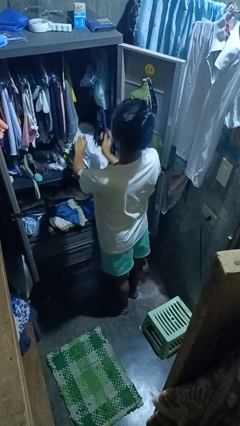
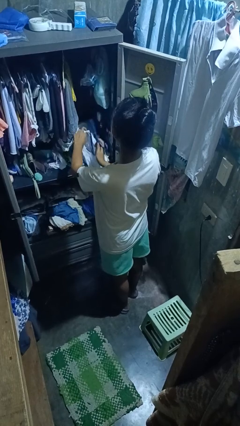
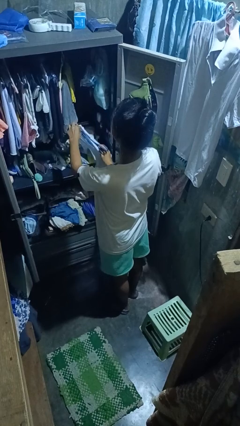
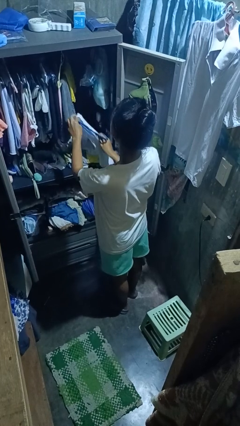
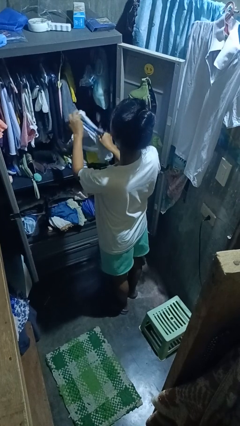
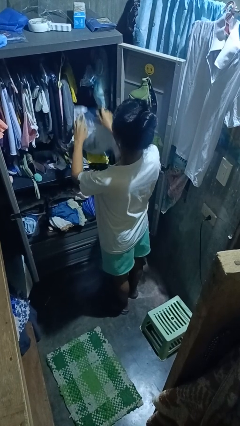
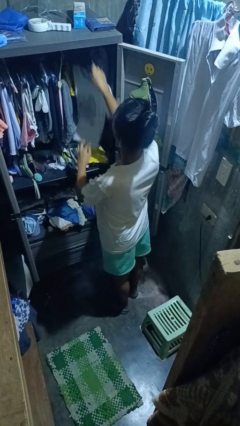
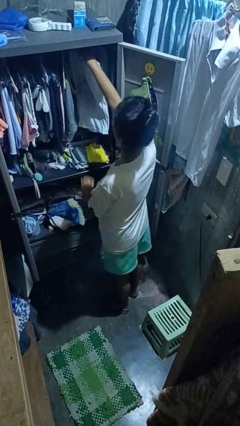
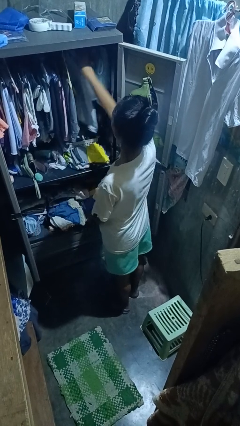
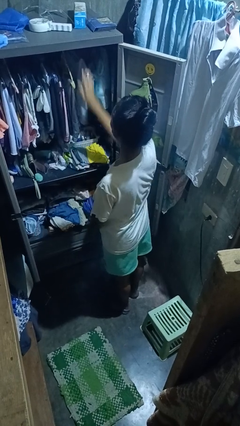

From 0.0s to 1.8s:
person puts clothes into closet

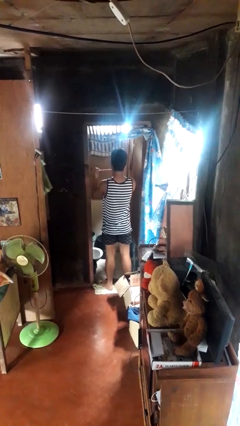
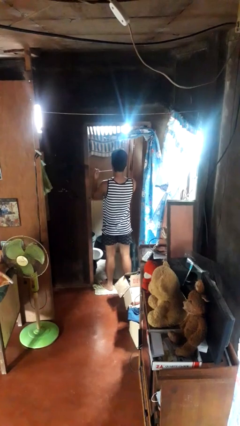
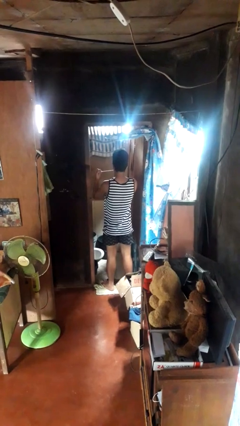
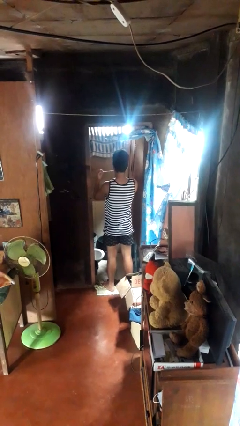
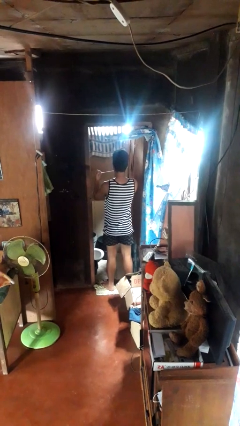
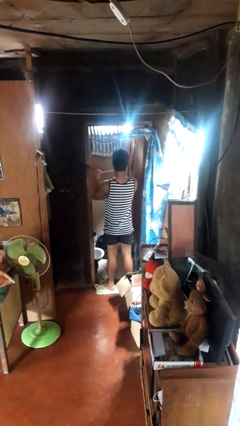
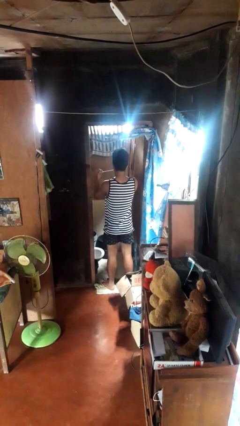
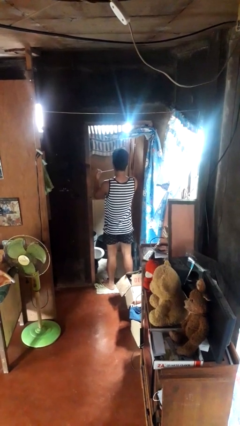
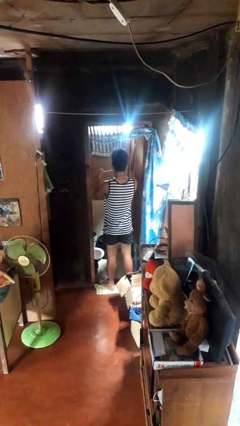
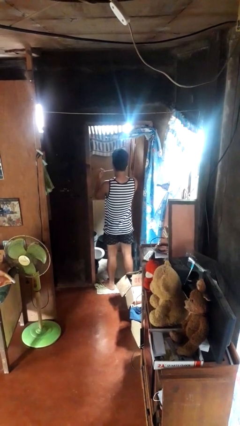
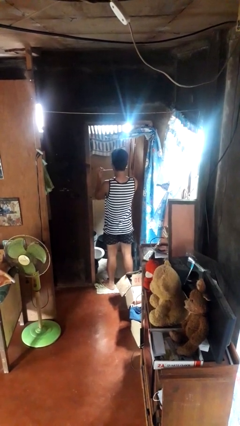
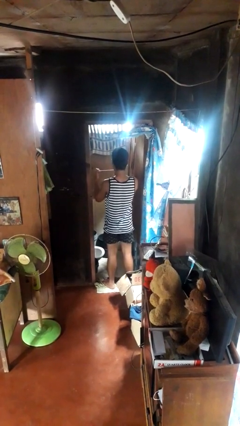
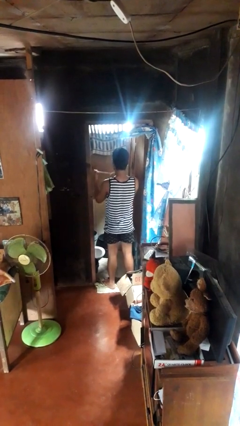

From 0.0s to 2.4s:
person flosses

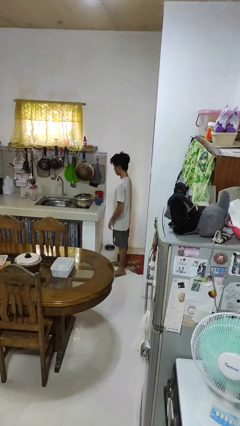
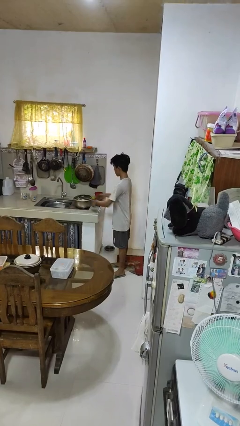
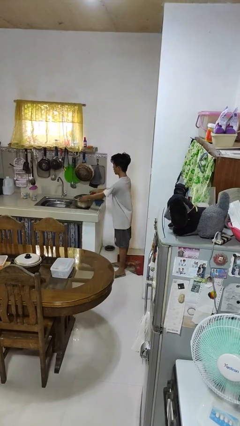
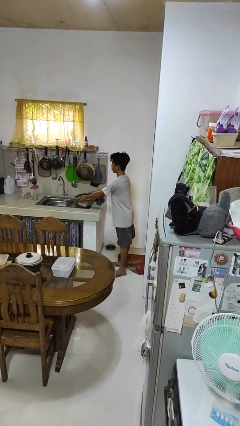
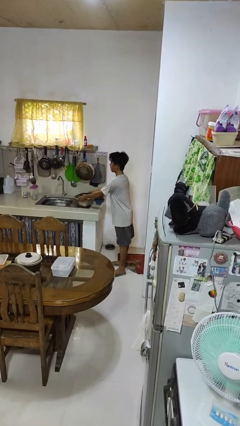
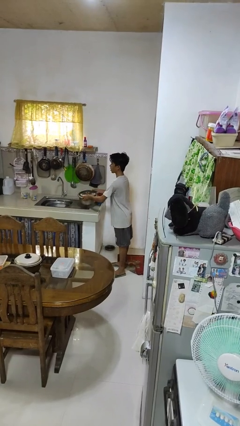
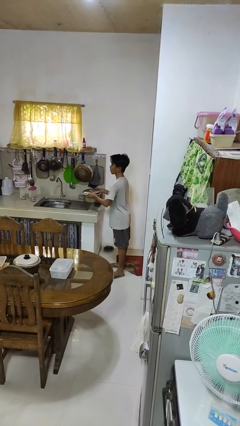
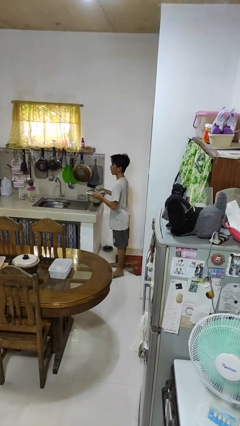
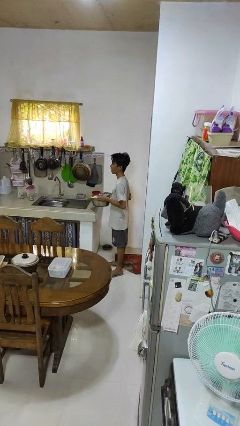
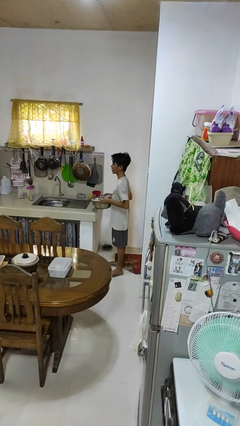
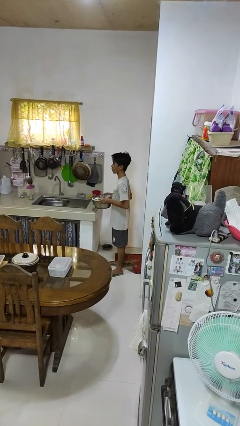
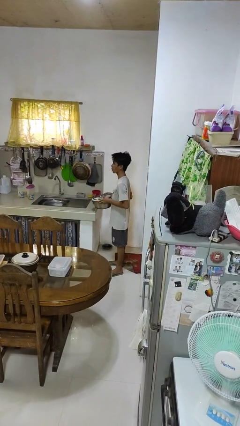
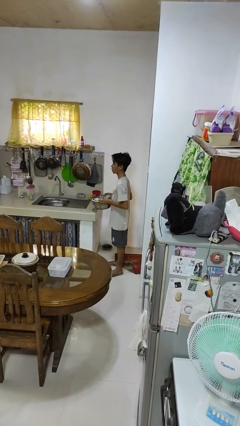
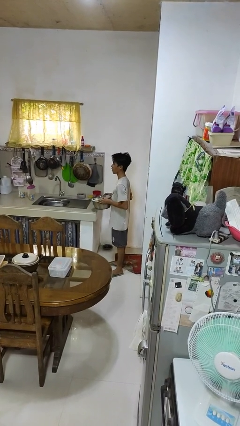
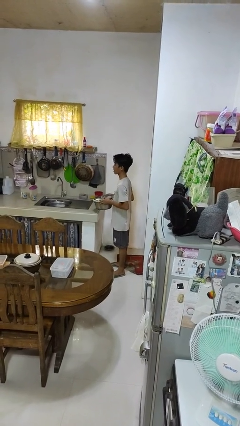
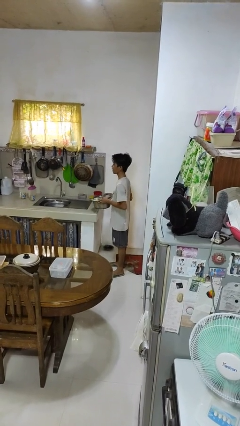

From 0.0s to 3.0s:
person picks up object from countertop

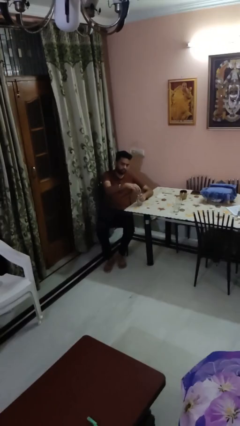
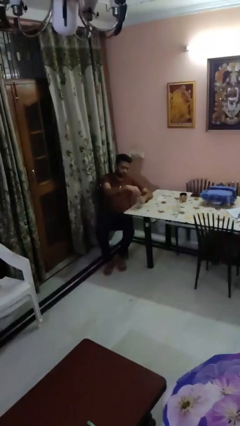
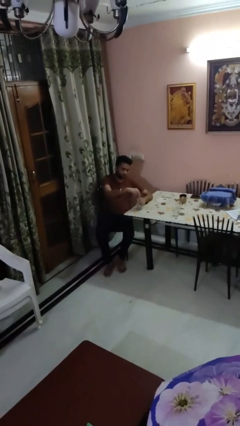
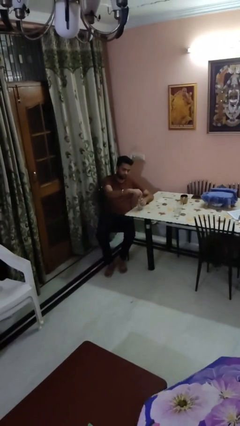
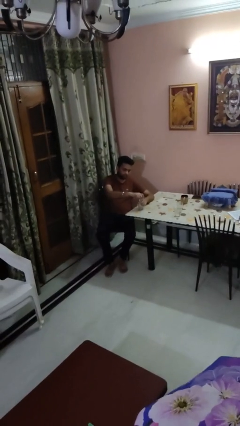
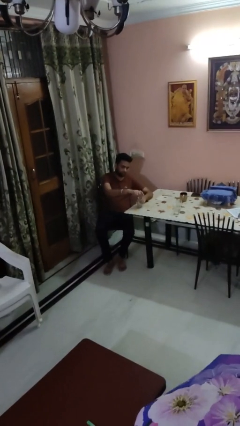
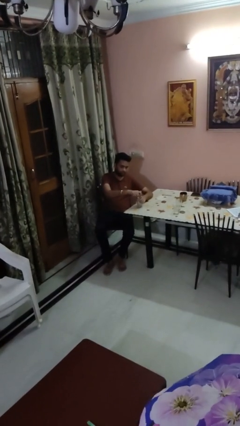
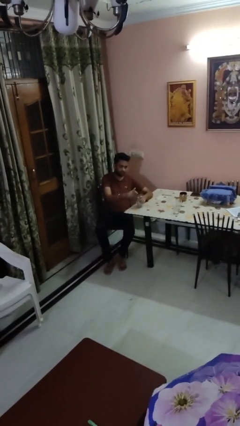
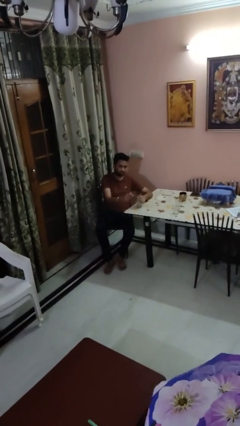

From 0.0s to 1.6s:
person screws lid to bottle

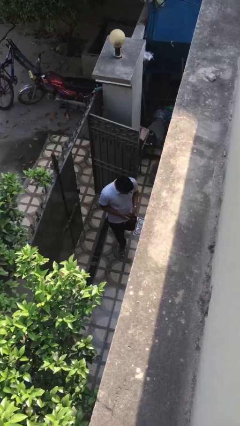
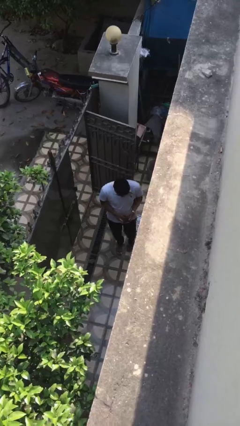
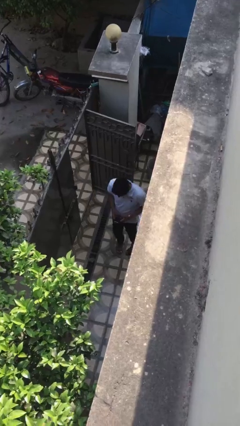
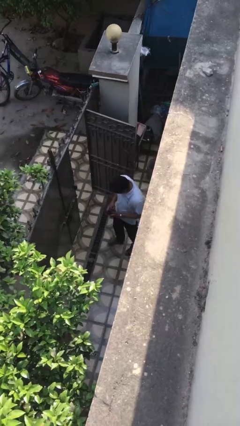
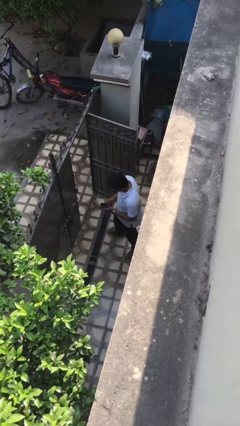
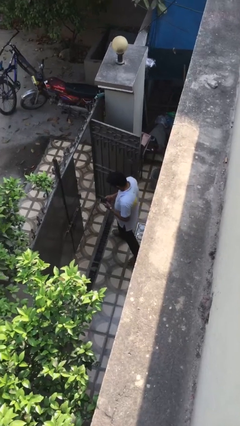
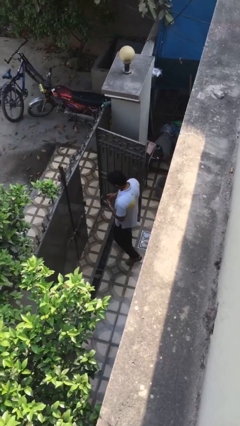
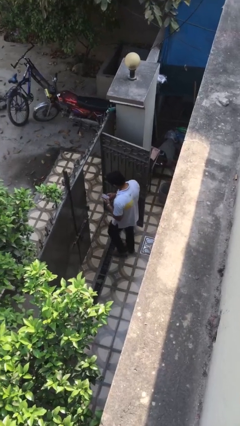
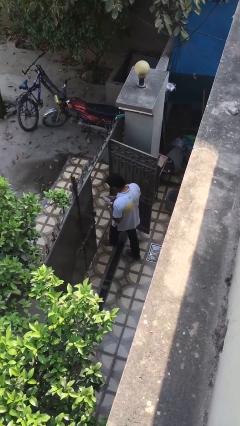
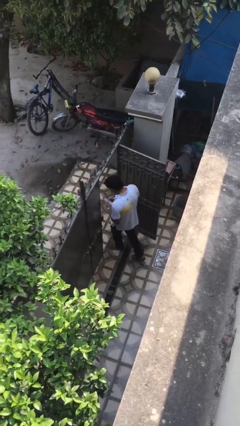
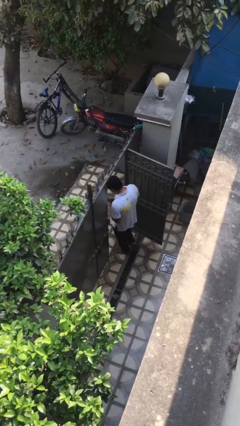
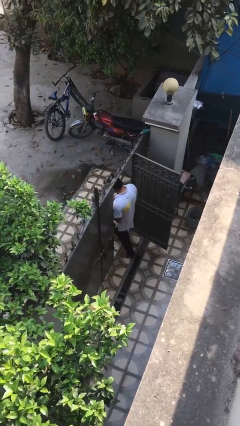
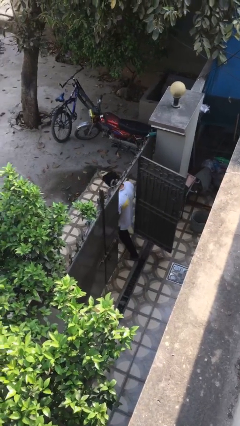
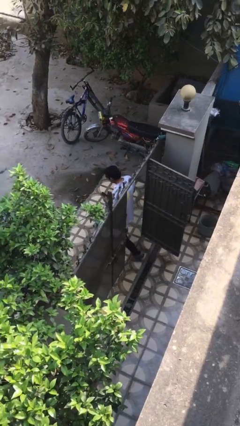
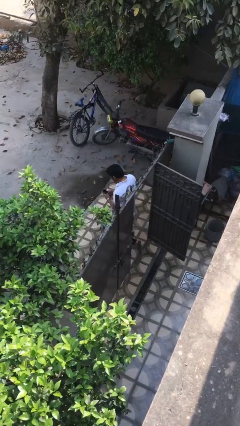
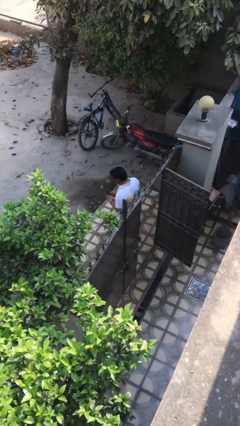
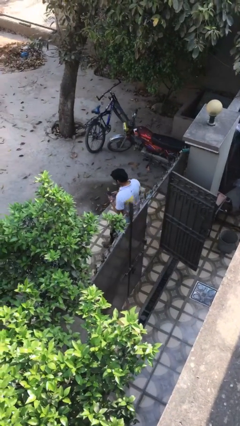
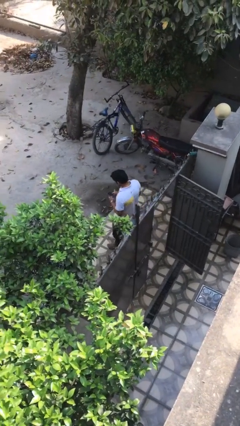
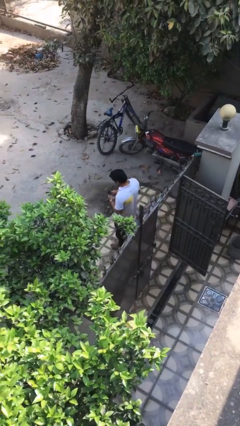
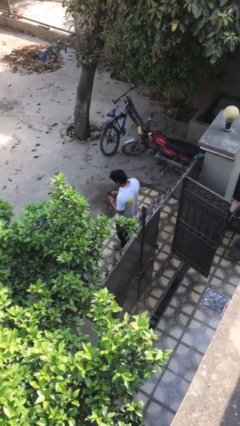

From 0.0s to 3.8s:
person exits scene through structure

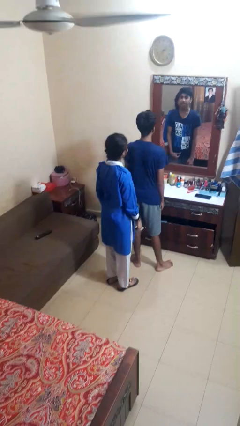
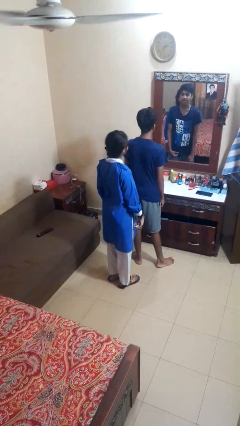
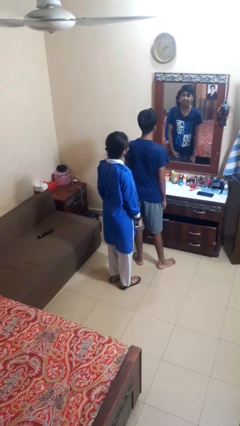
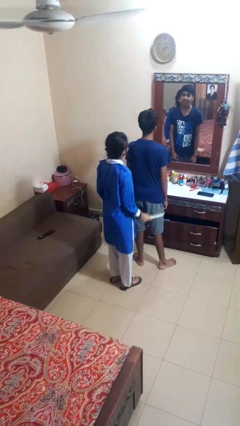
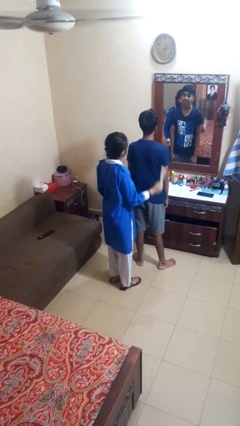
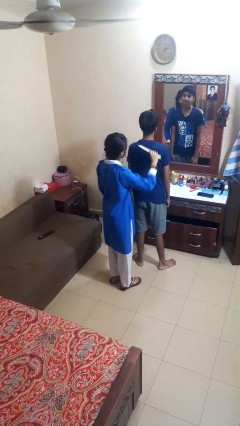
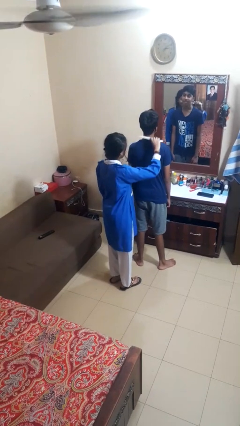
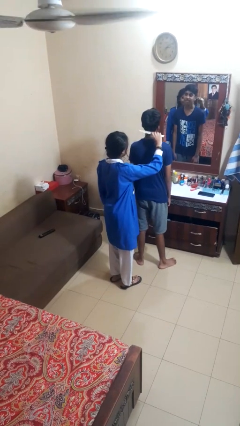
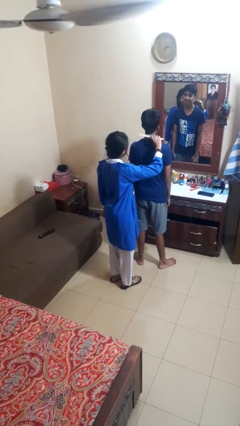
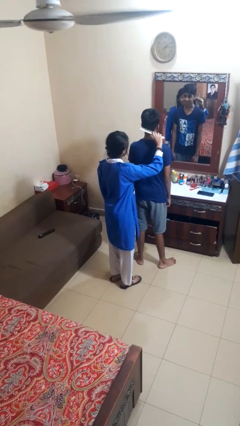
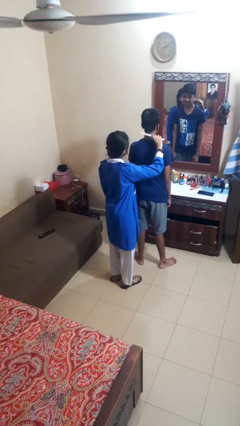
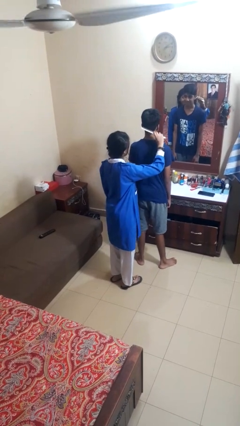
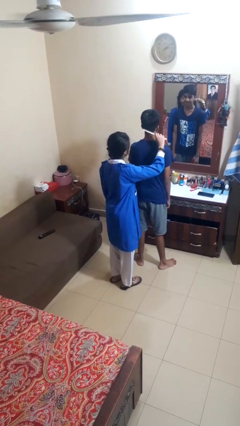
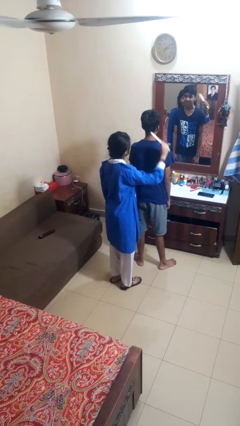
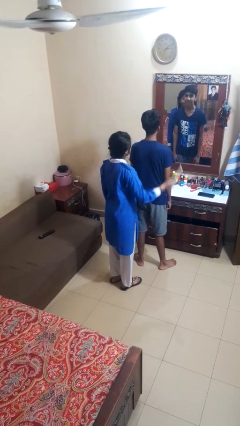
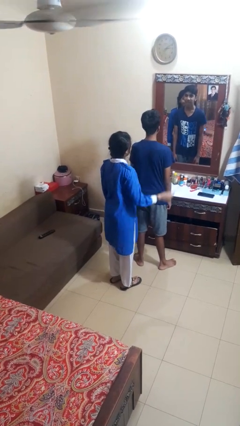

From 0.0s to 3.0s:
person brushes hair of person

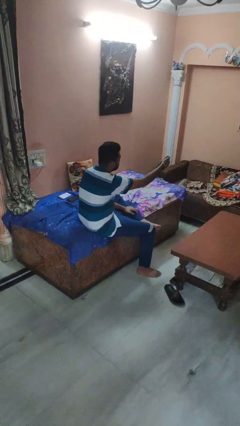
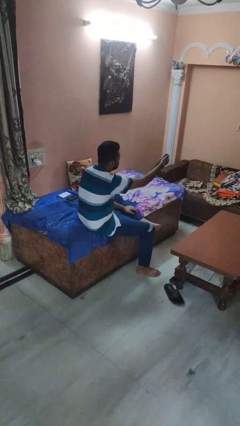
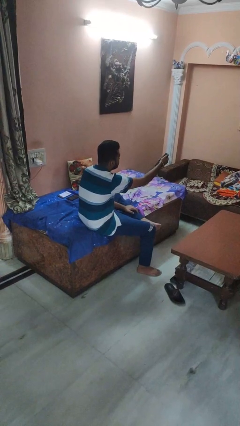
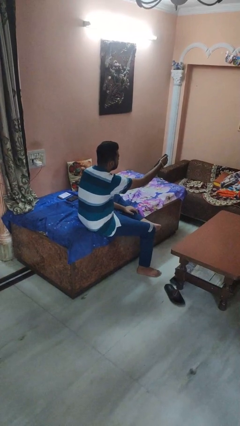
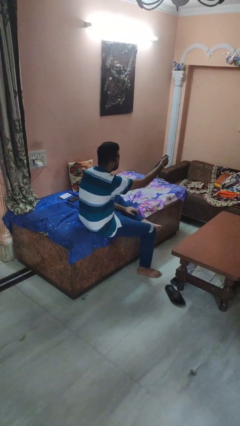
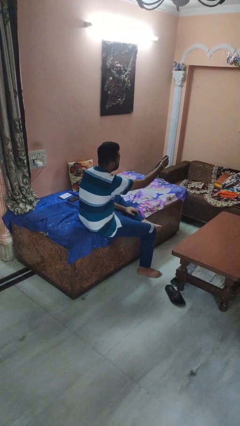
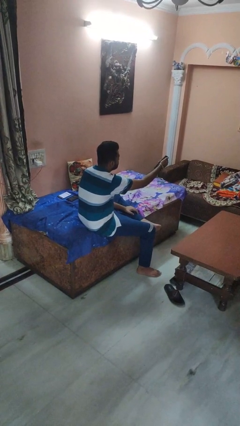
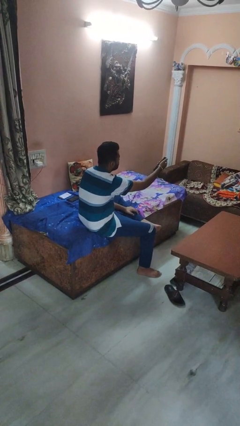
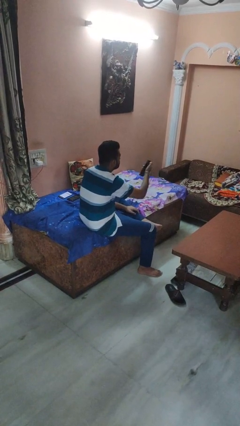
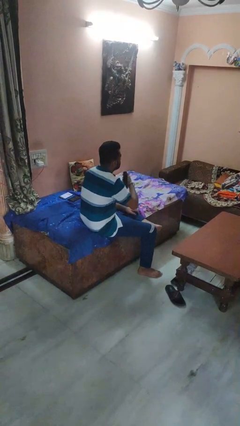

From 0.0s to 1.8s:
person uses television remote
